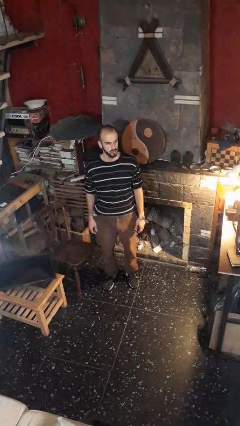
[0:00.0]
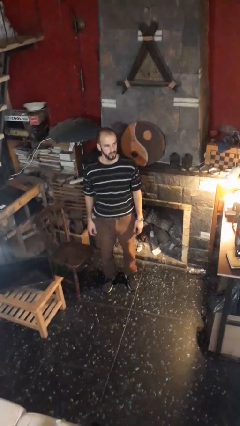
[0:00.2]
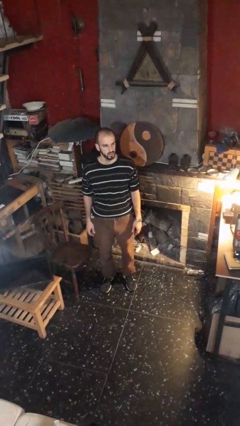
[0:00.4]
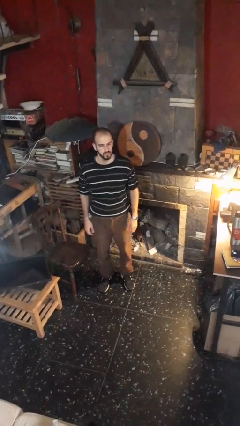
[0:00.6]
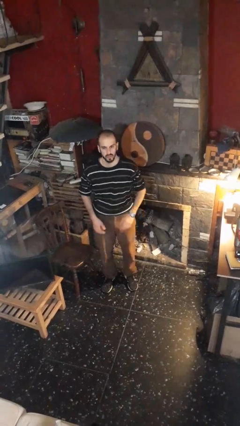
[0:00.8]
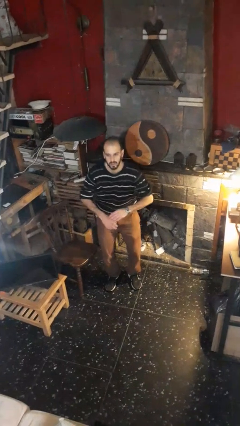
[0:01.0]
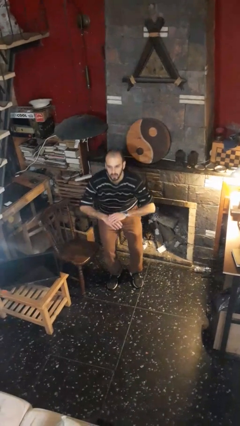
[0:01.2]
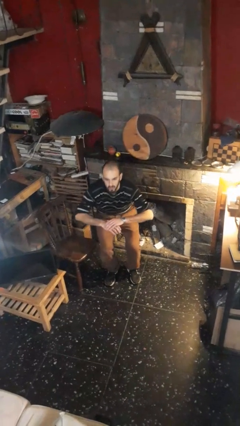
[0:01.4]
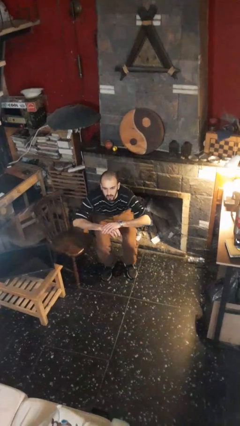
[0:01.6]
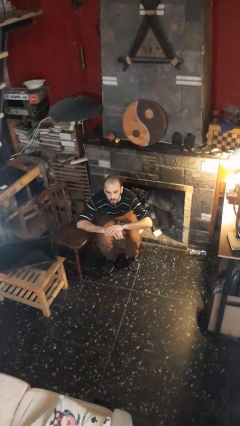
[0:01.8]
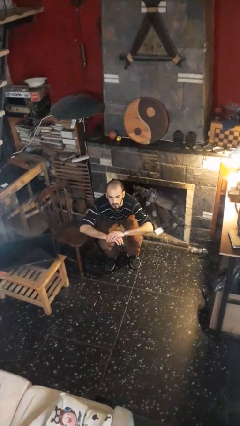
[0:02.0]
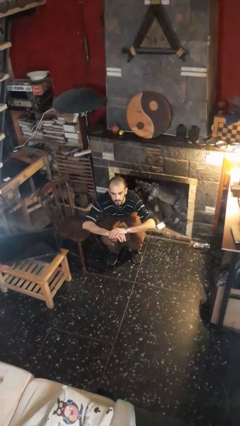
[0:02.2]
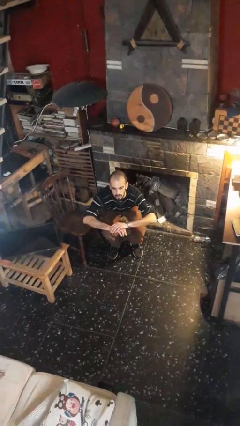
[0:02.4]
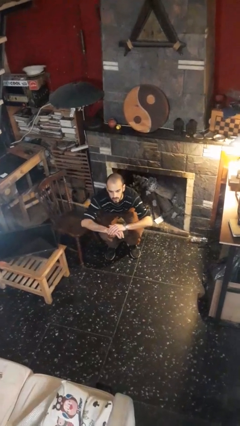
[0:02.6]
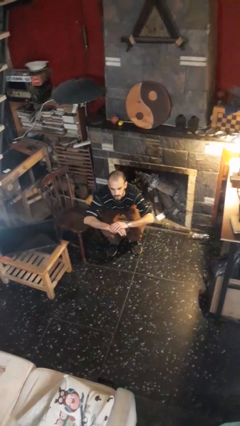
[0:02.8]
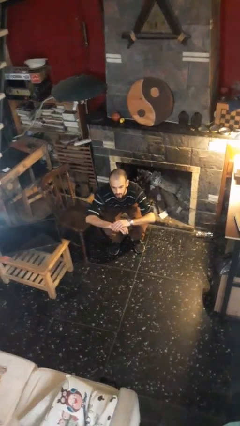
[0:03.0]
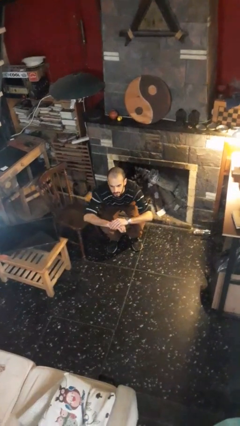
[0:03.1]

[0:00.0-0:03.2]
person squats

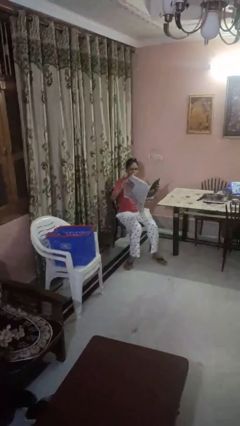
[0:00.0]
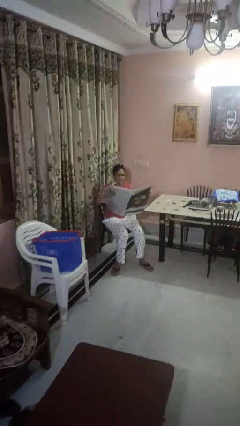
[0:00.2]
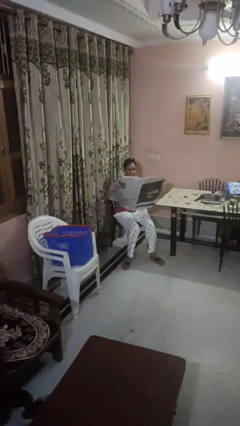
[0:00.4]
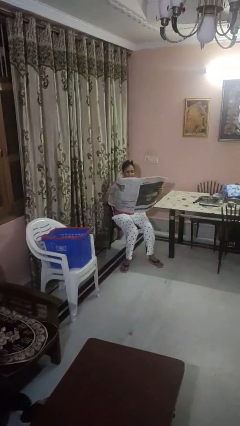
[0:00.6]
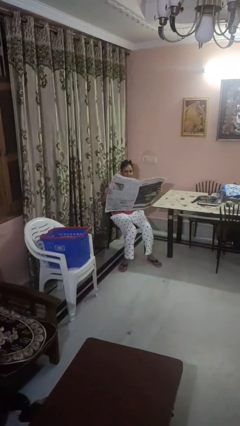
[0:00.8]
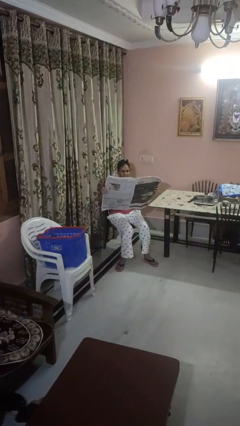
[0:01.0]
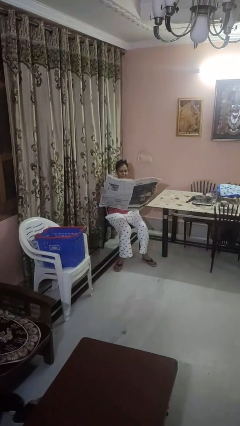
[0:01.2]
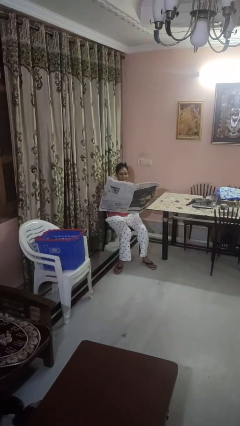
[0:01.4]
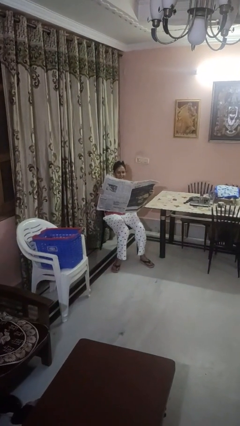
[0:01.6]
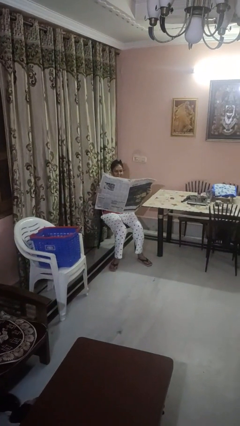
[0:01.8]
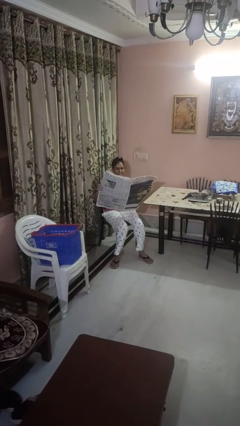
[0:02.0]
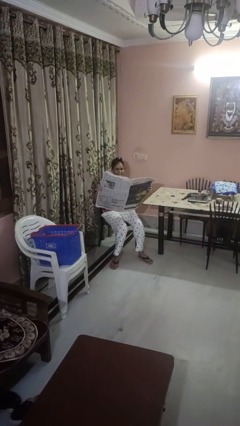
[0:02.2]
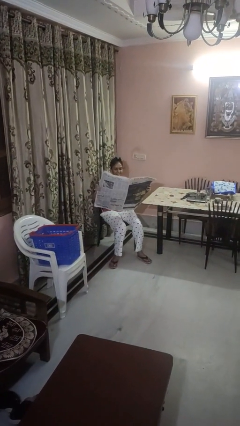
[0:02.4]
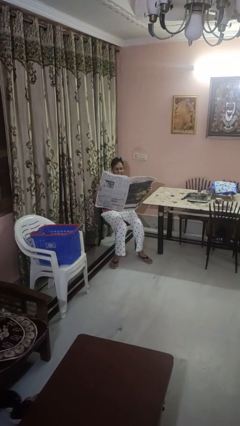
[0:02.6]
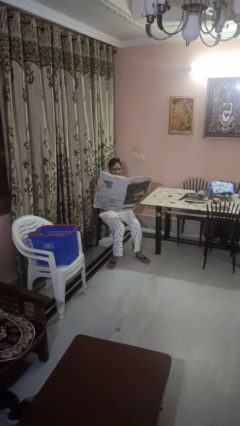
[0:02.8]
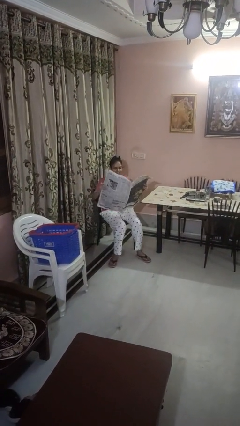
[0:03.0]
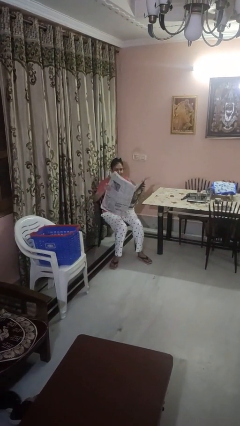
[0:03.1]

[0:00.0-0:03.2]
person reads newspaper

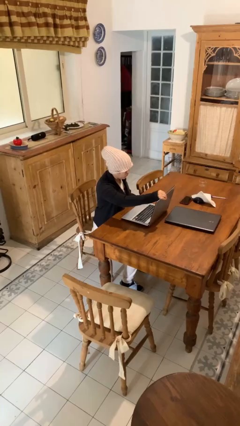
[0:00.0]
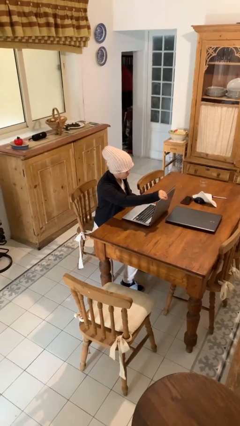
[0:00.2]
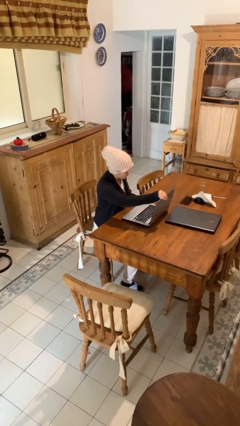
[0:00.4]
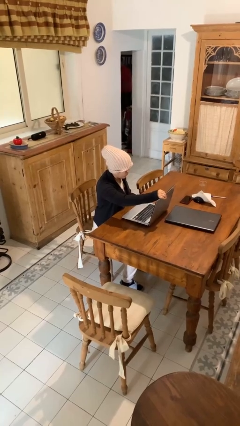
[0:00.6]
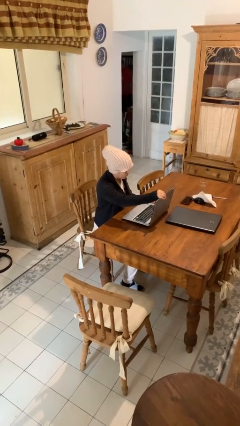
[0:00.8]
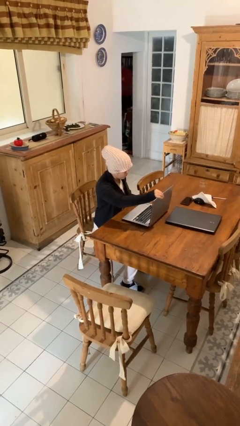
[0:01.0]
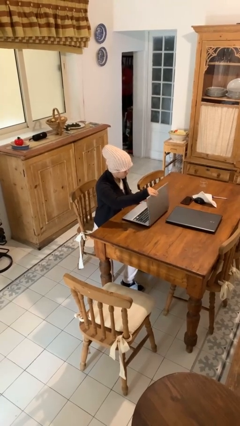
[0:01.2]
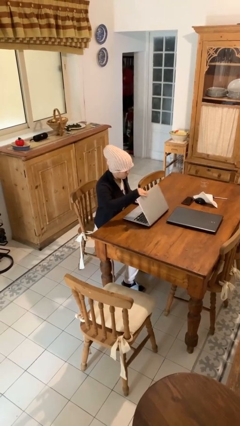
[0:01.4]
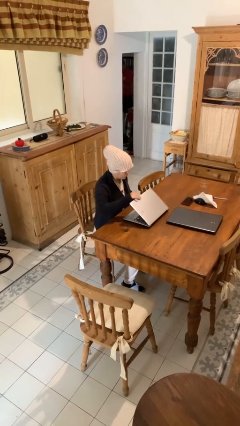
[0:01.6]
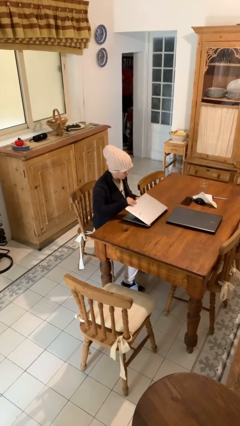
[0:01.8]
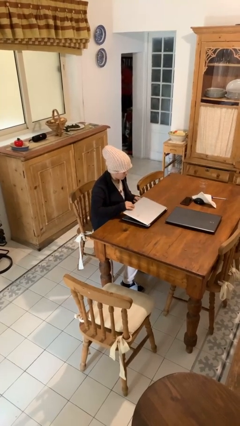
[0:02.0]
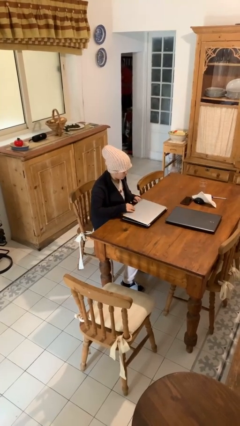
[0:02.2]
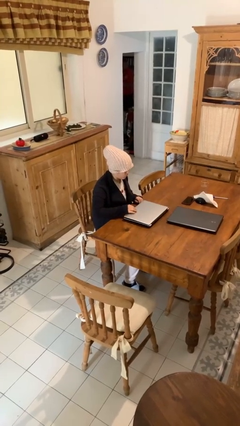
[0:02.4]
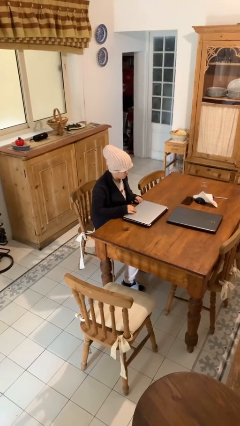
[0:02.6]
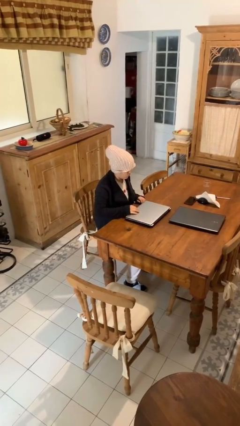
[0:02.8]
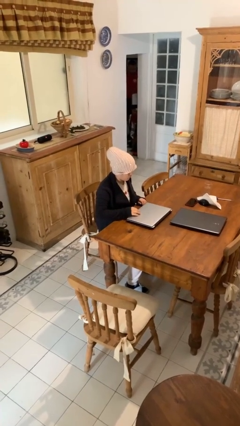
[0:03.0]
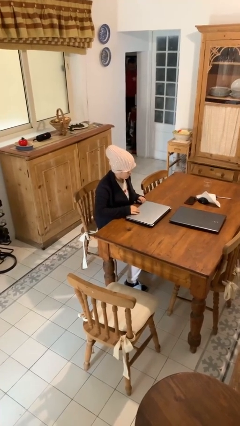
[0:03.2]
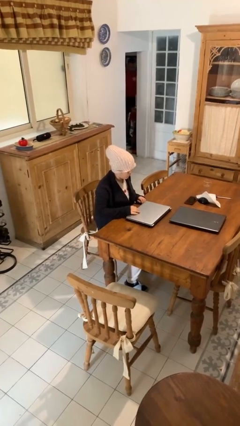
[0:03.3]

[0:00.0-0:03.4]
person closes laptop

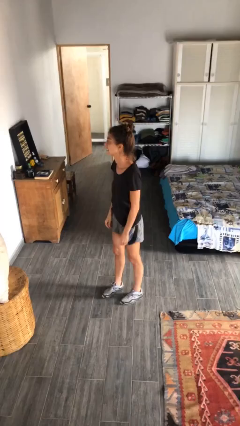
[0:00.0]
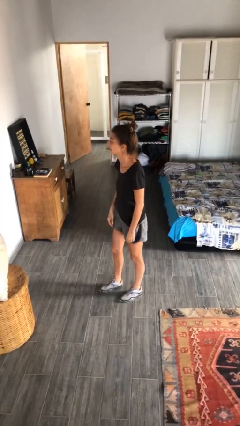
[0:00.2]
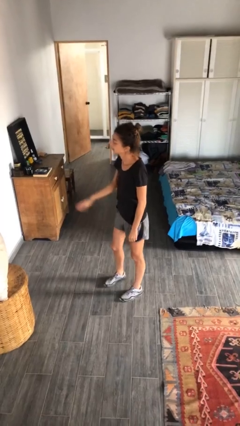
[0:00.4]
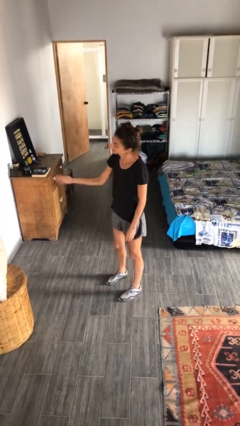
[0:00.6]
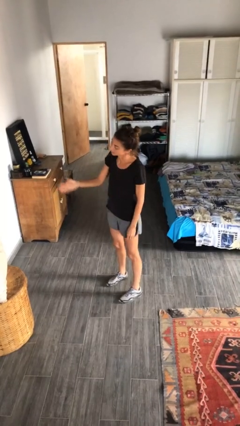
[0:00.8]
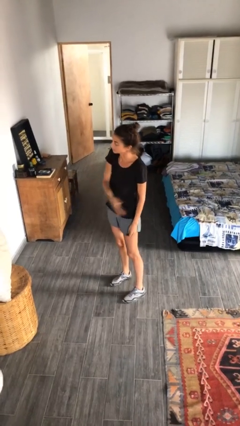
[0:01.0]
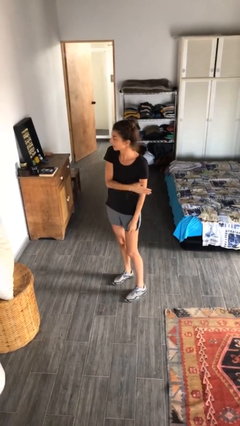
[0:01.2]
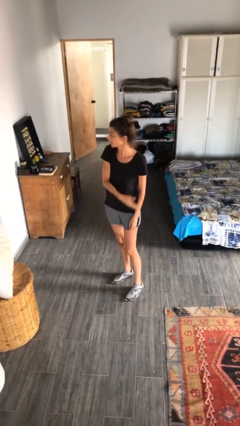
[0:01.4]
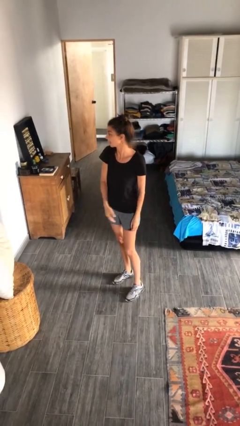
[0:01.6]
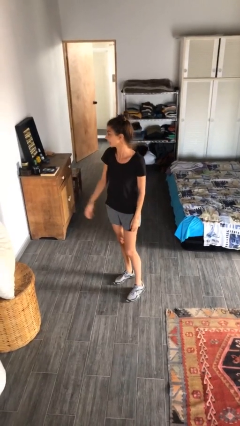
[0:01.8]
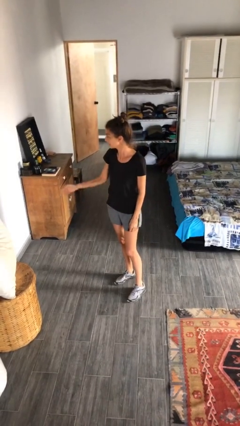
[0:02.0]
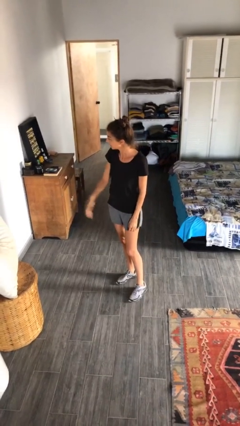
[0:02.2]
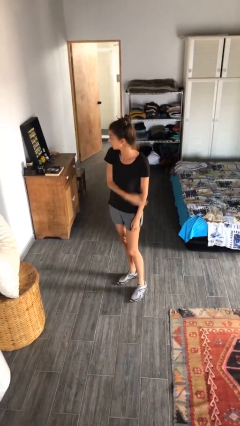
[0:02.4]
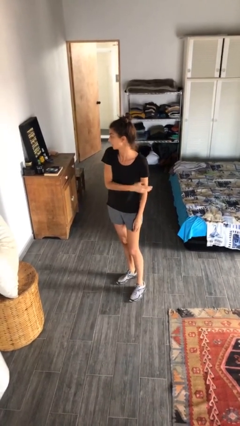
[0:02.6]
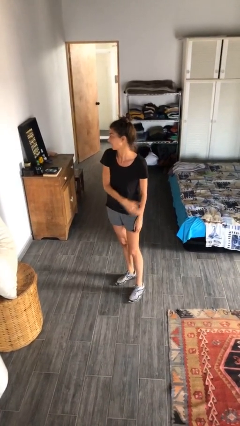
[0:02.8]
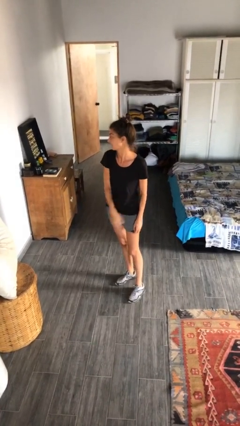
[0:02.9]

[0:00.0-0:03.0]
person gestures come here

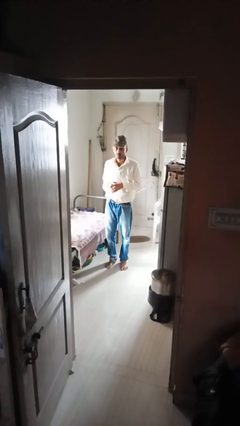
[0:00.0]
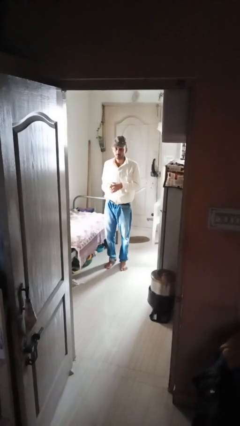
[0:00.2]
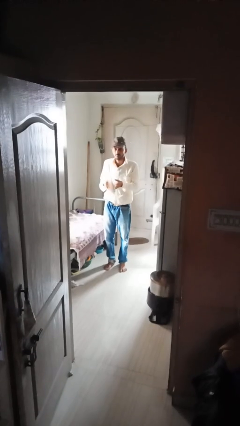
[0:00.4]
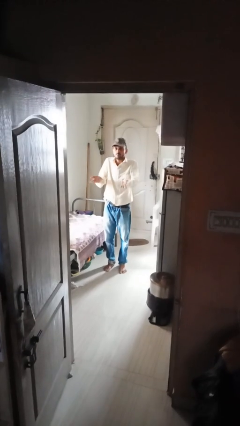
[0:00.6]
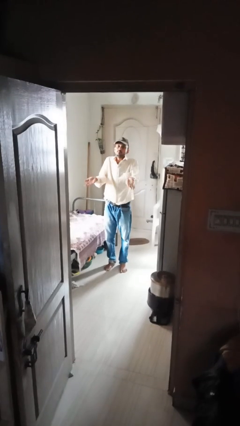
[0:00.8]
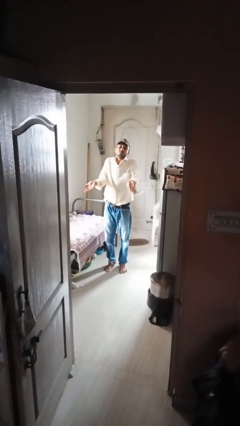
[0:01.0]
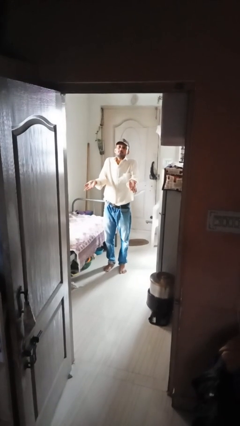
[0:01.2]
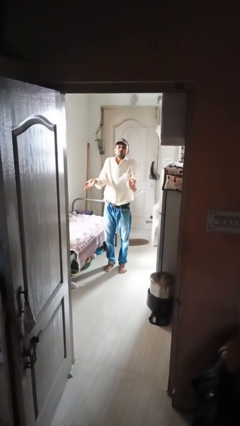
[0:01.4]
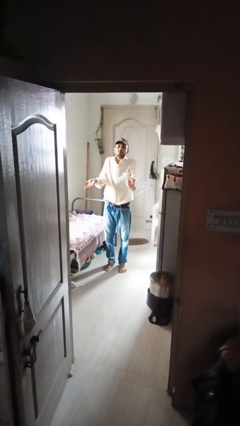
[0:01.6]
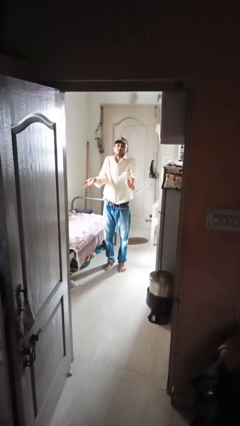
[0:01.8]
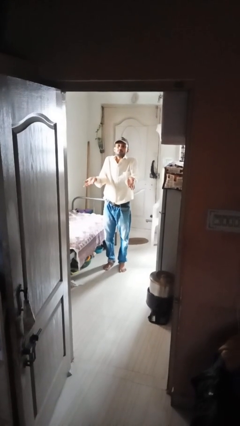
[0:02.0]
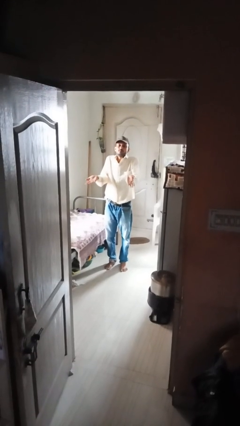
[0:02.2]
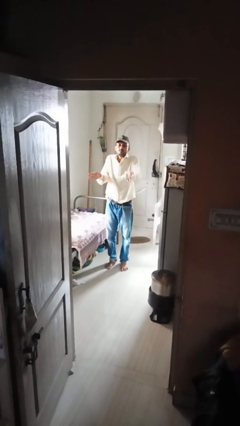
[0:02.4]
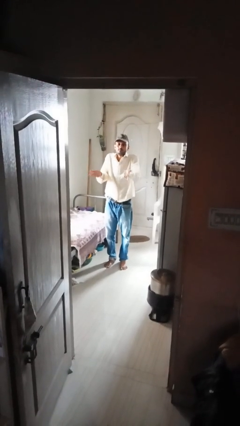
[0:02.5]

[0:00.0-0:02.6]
person shrugs

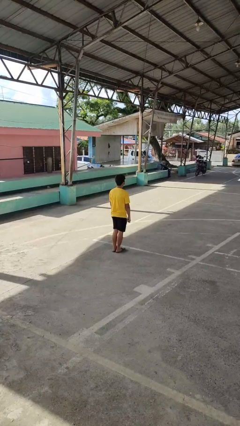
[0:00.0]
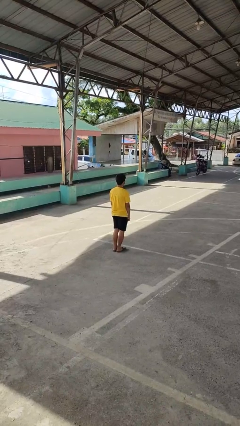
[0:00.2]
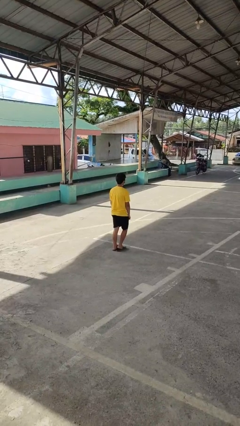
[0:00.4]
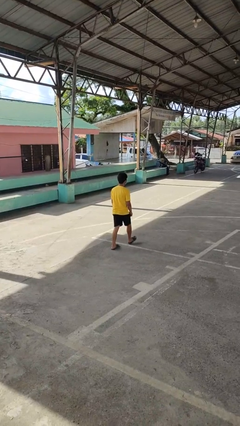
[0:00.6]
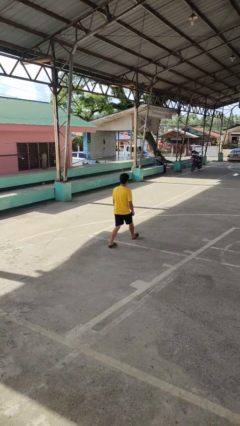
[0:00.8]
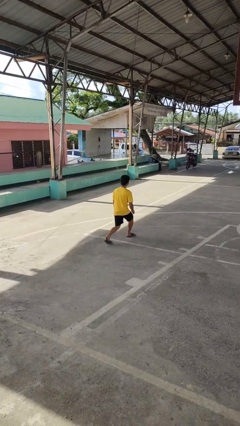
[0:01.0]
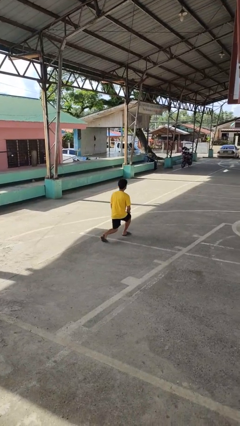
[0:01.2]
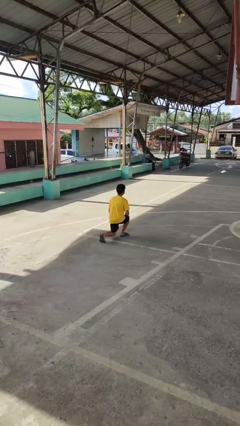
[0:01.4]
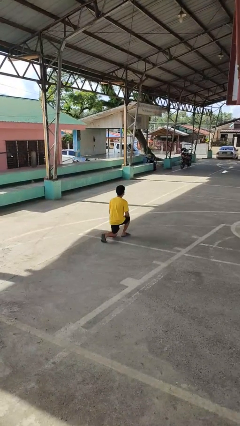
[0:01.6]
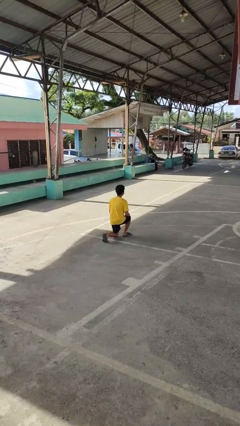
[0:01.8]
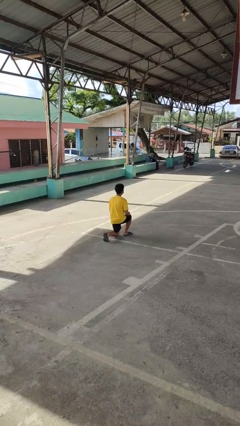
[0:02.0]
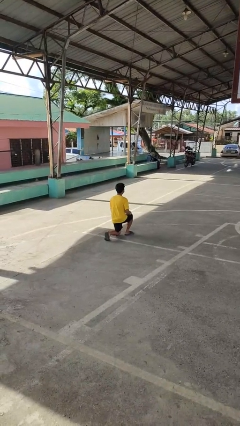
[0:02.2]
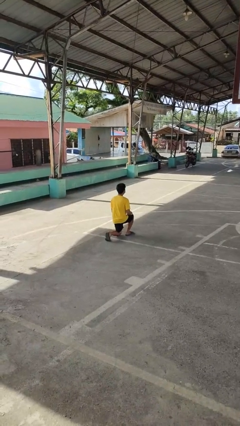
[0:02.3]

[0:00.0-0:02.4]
person kneels
